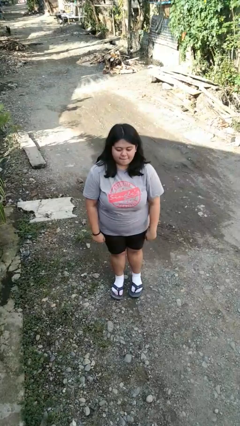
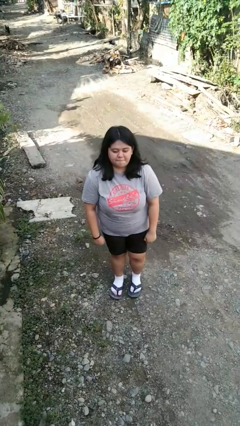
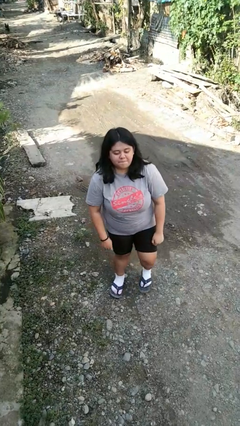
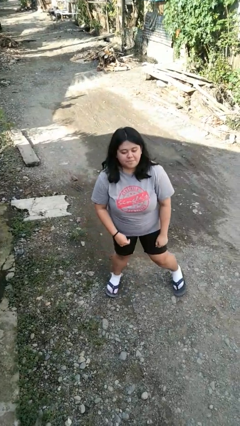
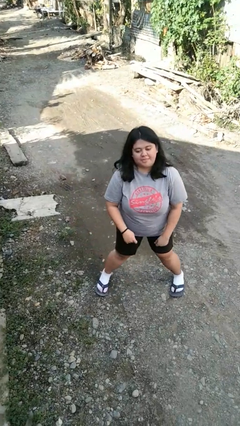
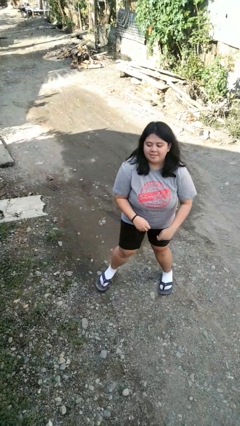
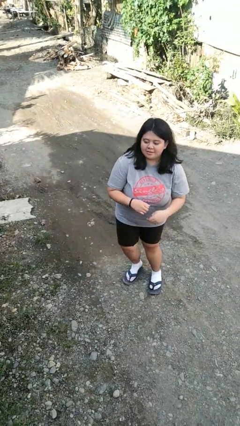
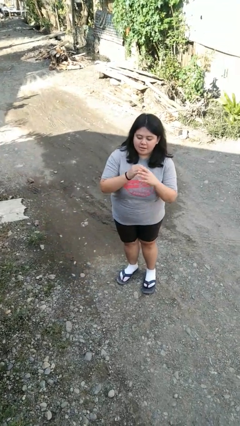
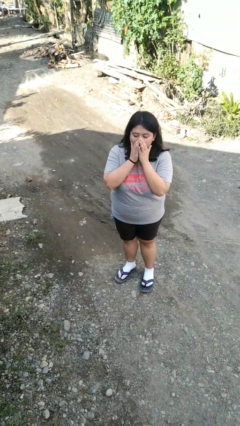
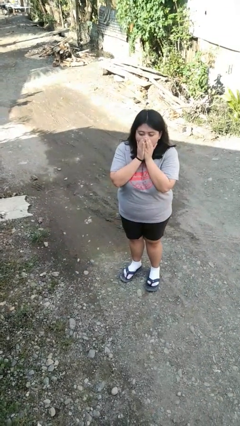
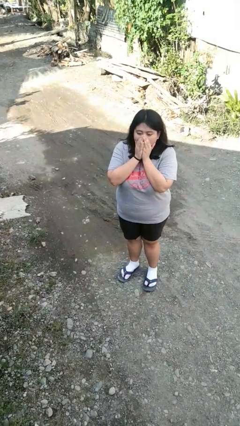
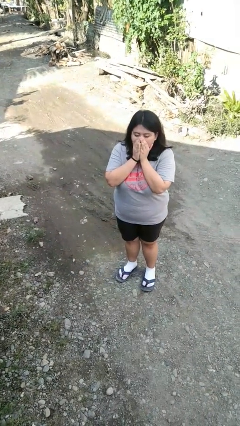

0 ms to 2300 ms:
person blows into hands

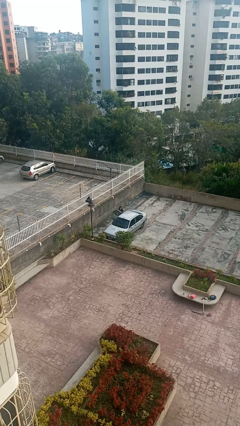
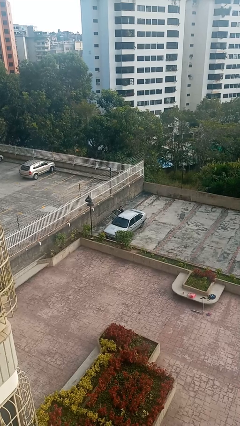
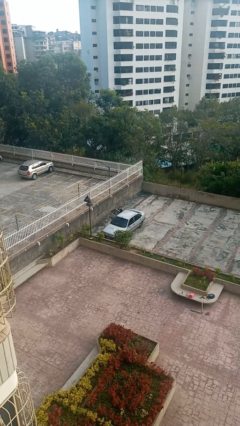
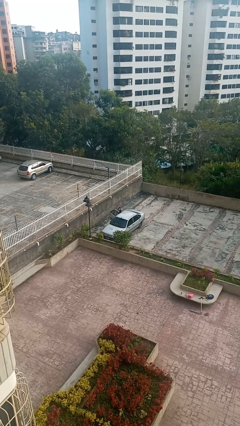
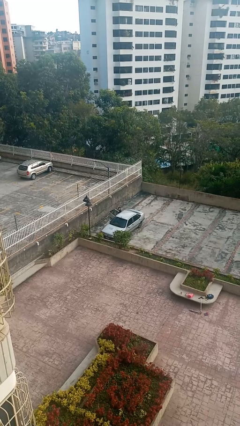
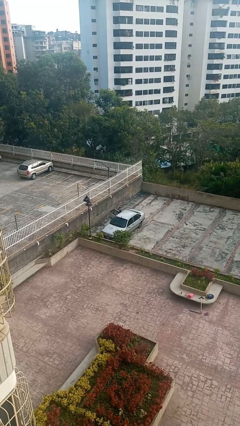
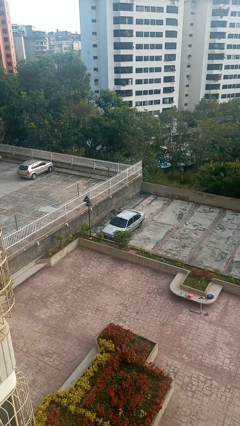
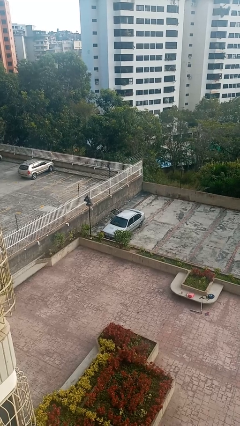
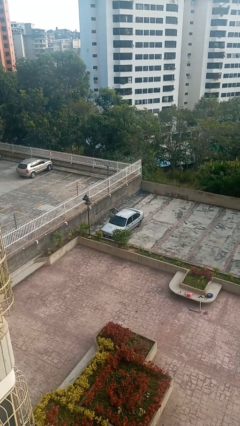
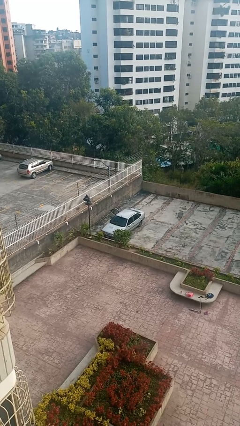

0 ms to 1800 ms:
person enters car

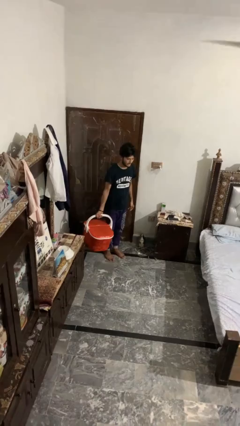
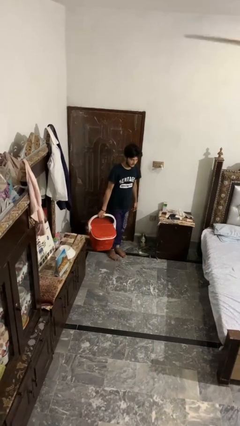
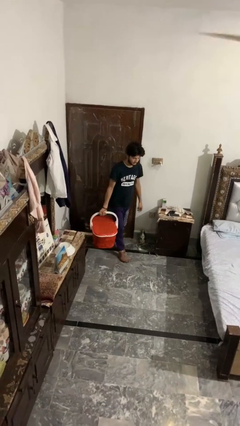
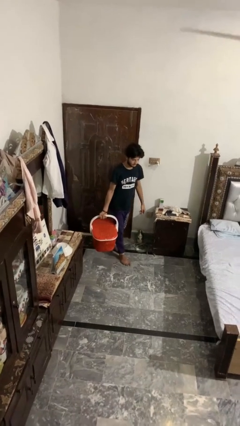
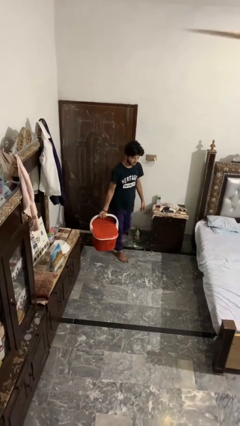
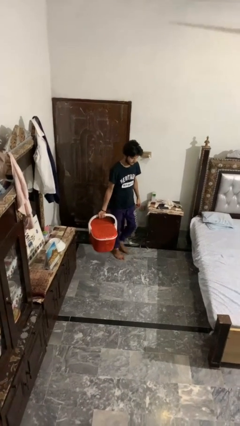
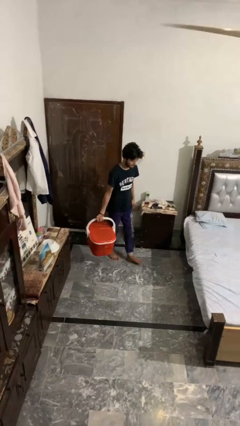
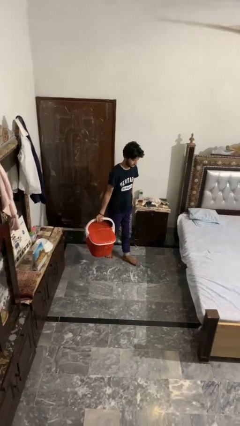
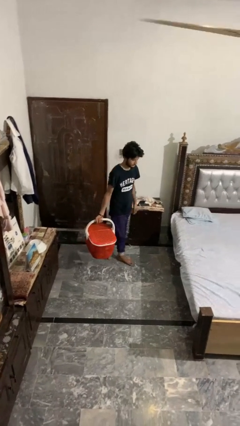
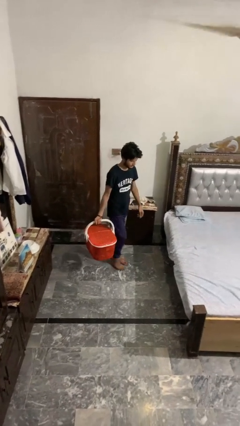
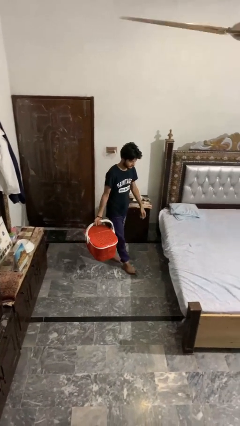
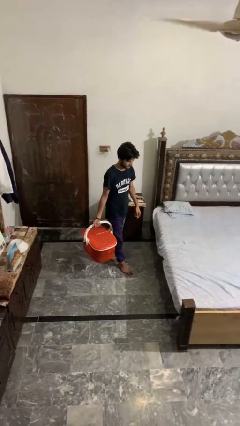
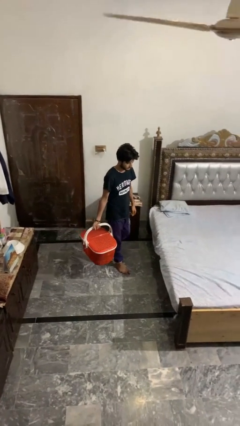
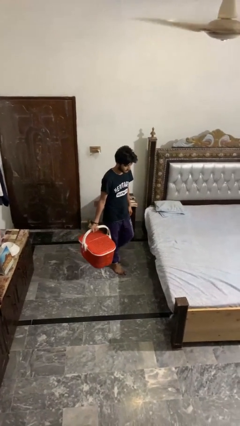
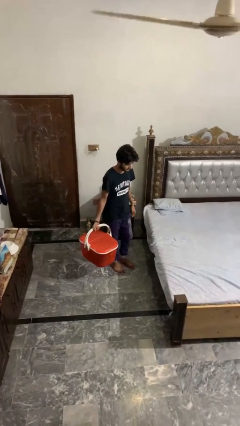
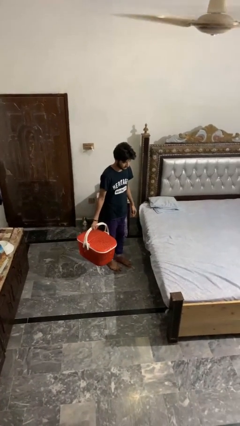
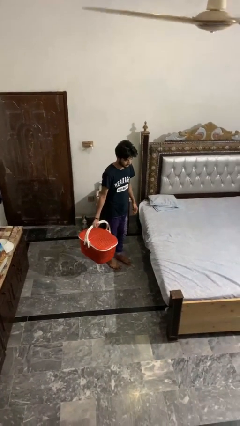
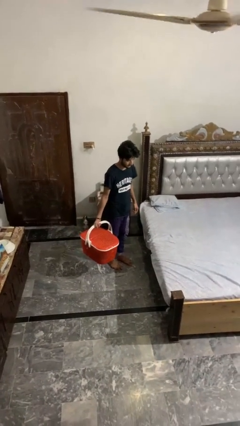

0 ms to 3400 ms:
person carries laundry basket

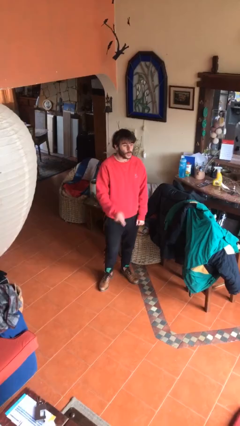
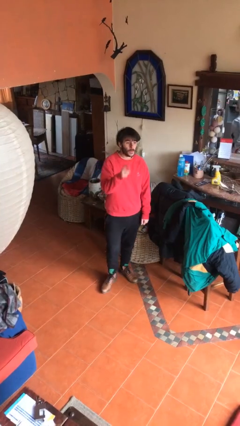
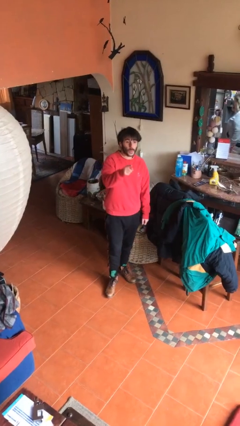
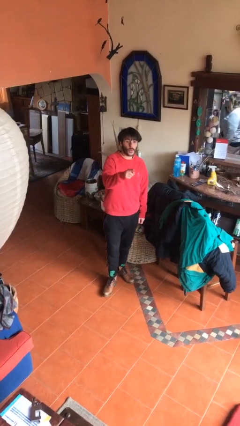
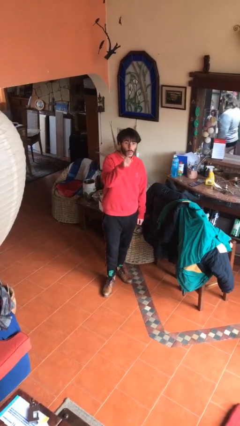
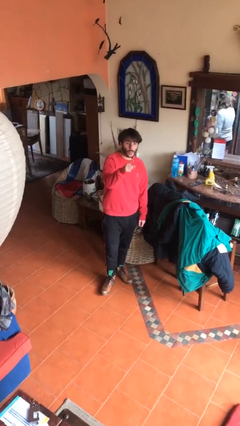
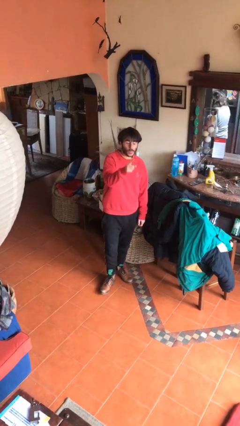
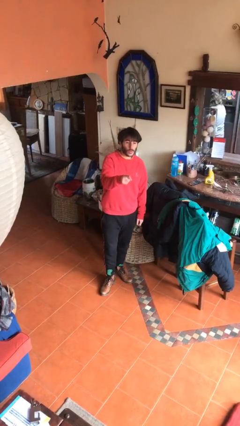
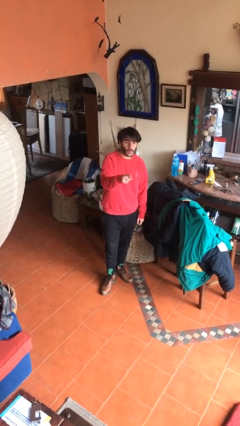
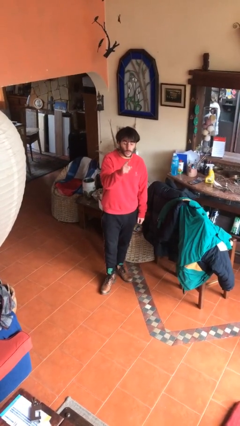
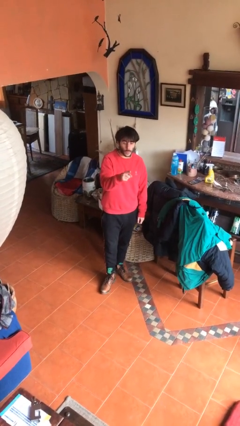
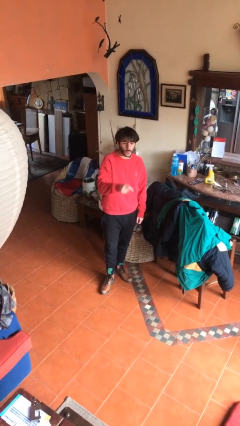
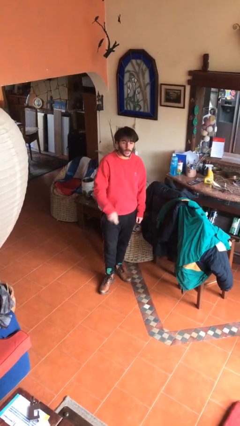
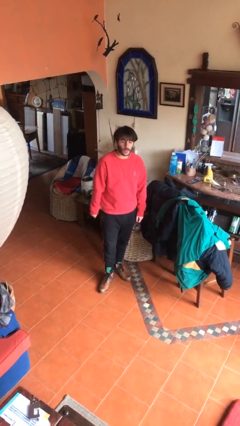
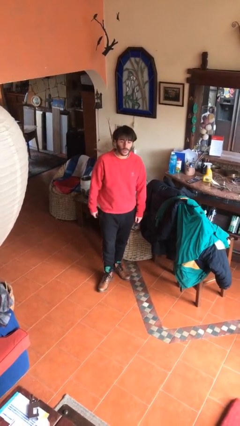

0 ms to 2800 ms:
person points at person

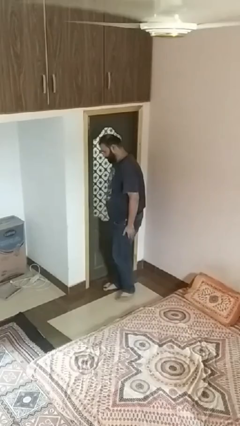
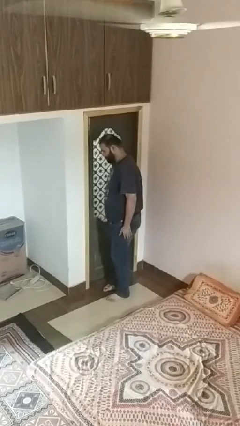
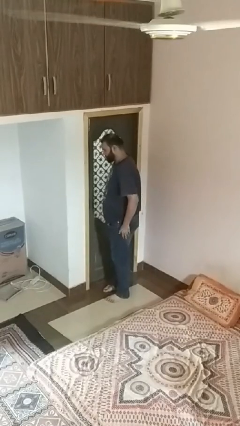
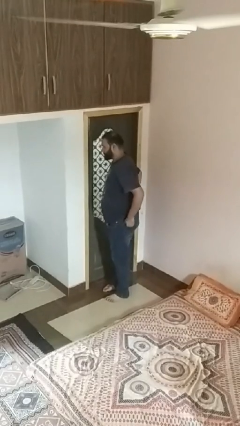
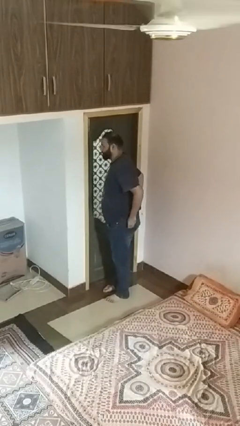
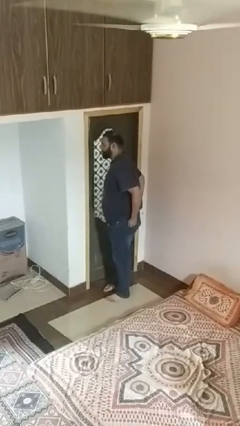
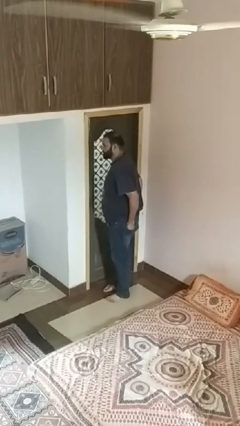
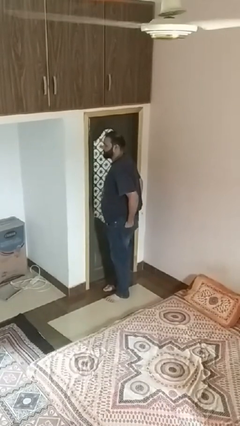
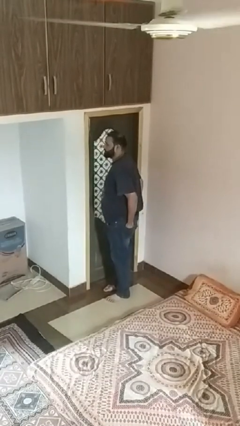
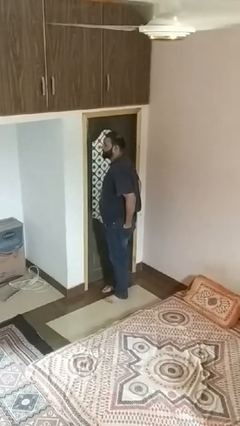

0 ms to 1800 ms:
person puts hands in back pockets

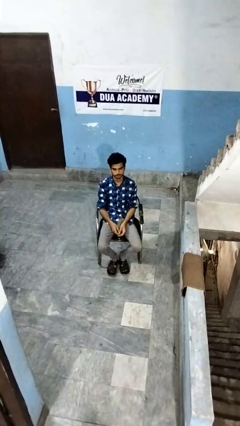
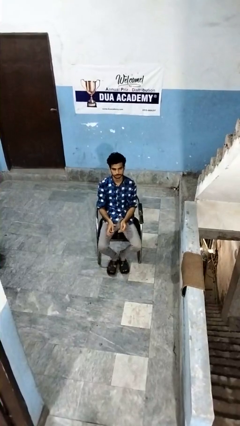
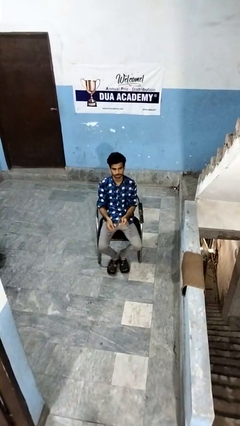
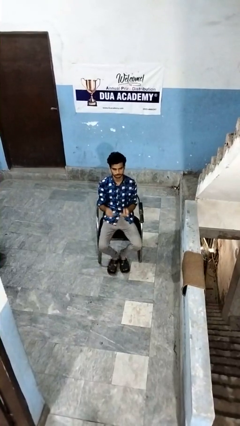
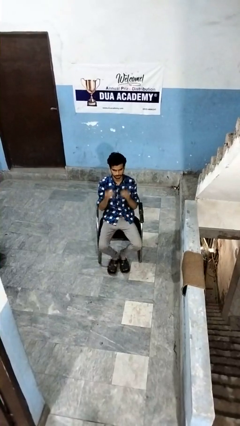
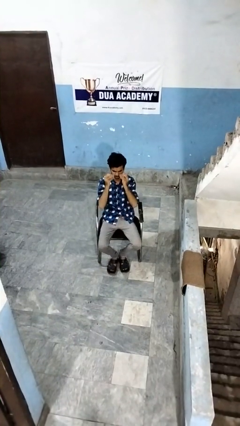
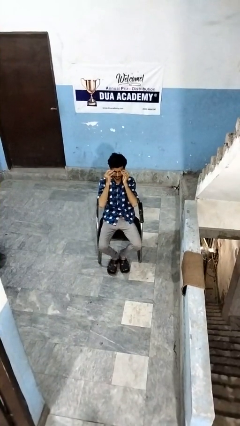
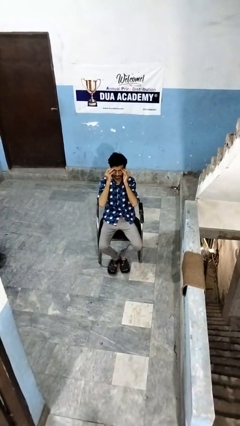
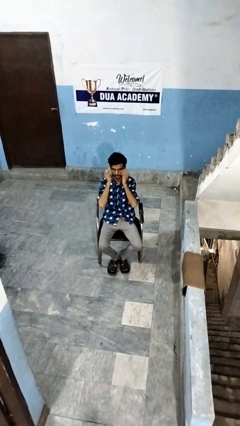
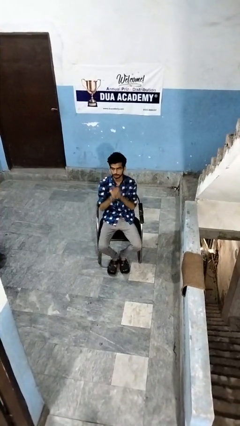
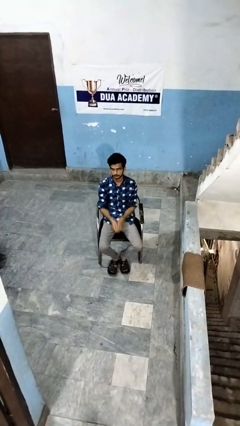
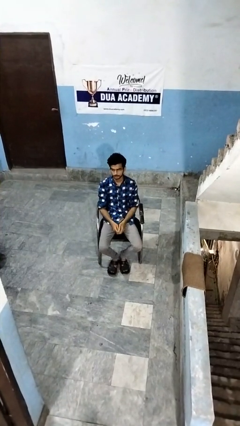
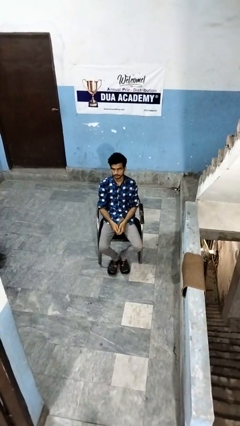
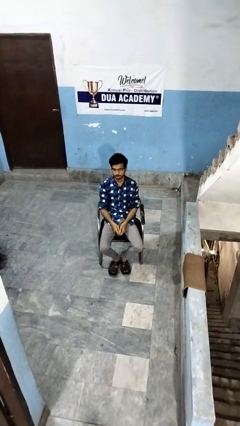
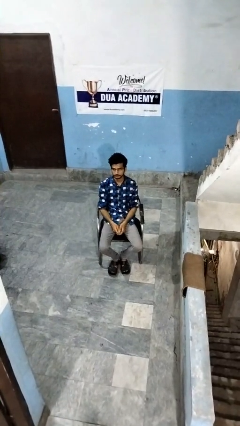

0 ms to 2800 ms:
person puts on glasses

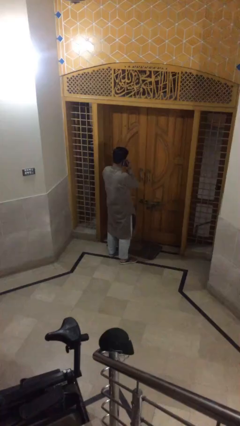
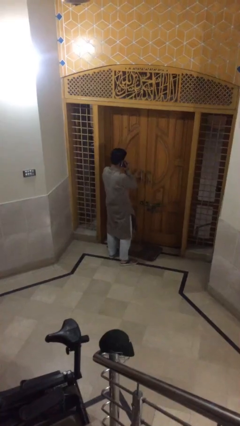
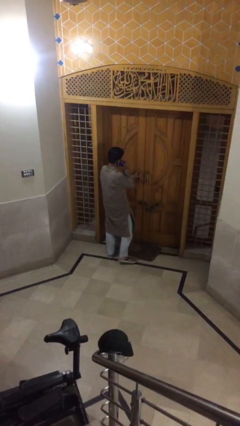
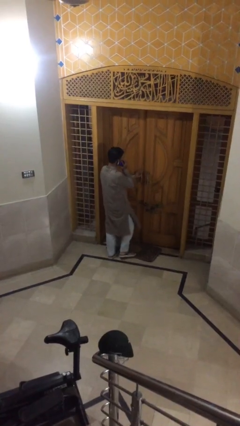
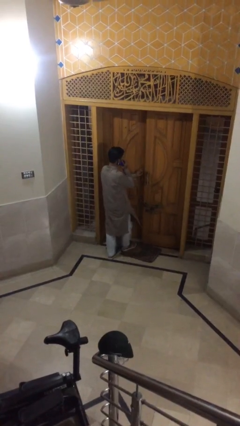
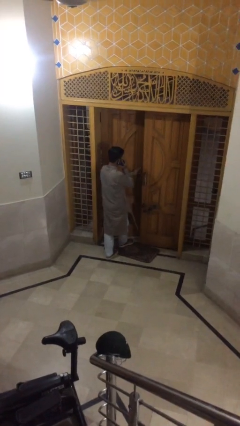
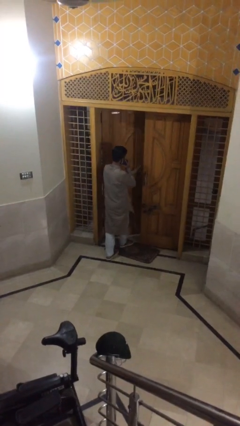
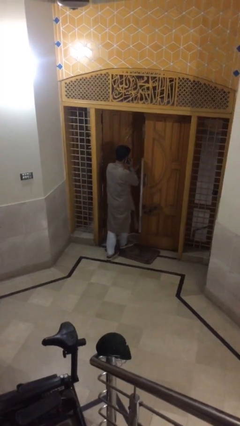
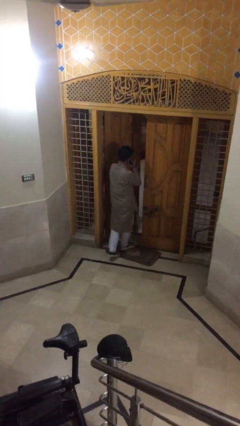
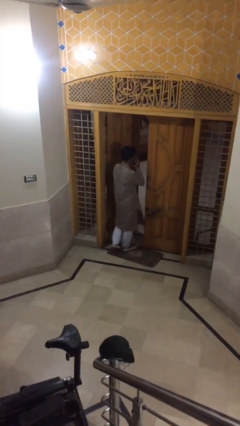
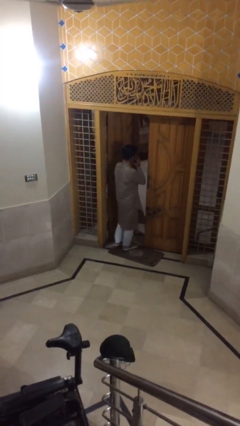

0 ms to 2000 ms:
person opens facility door

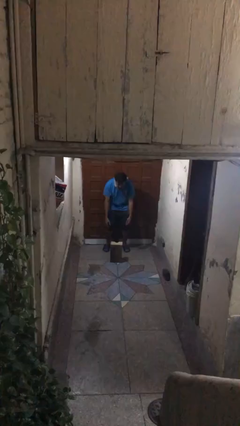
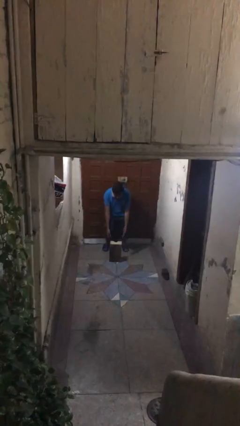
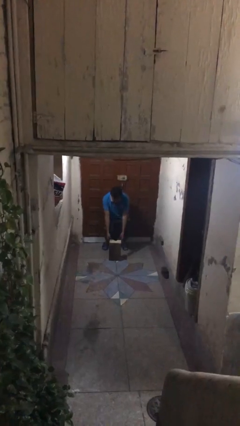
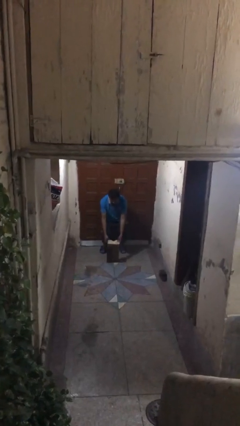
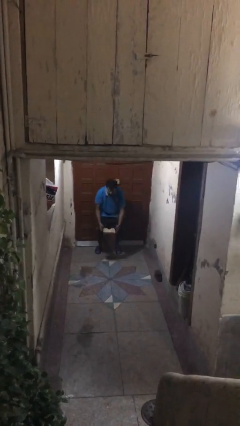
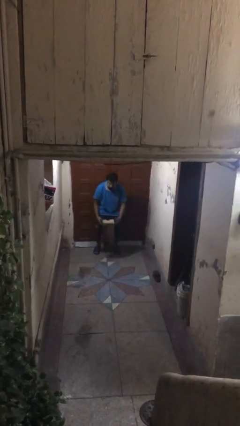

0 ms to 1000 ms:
person picks up object from floor
